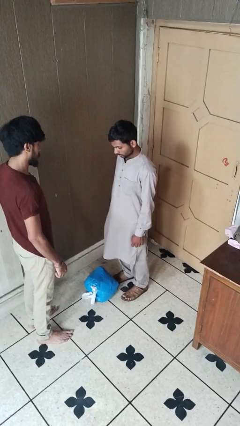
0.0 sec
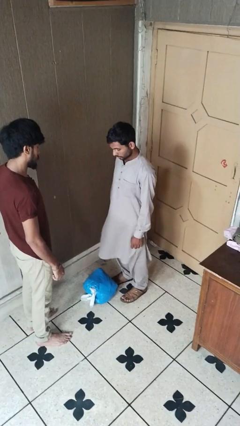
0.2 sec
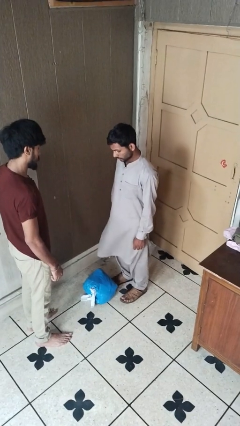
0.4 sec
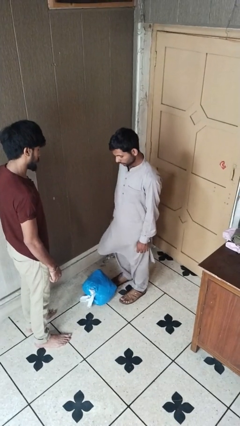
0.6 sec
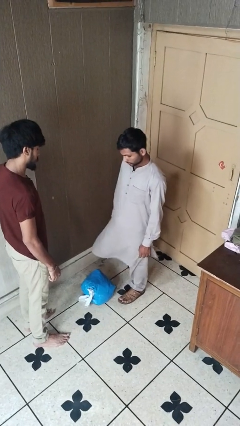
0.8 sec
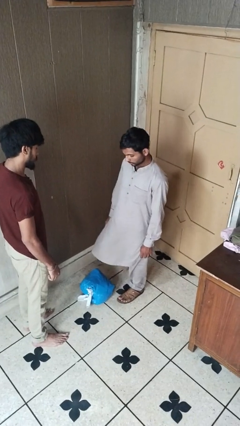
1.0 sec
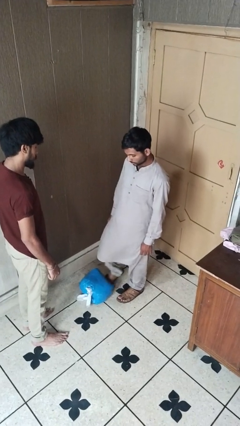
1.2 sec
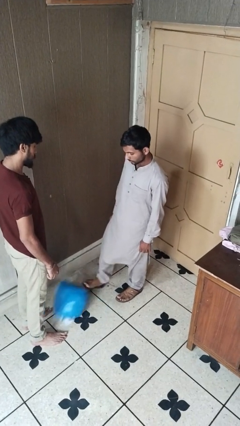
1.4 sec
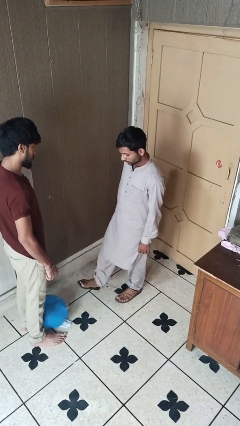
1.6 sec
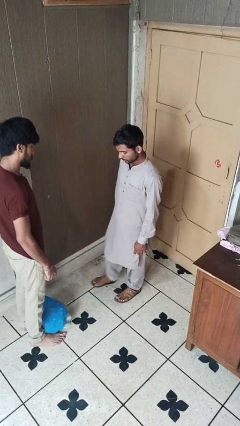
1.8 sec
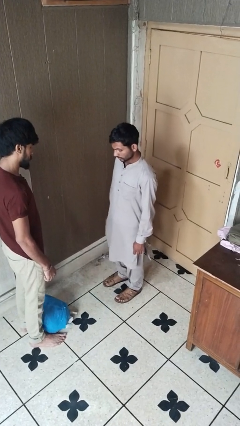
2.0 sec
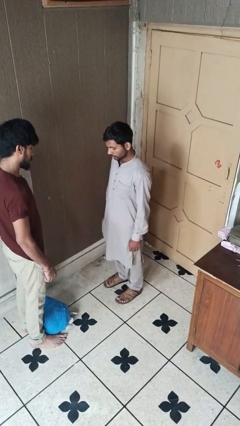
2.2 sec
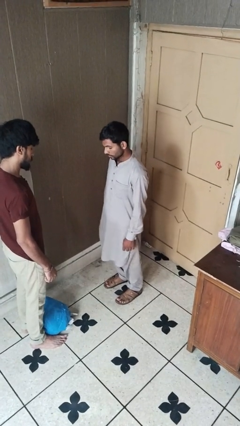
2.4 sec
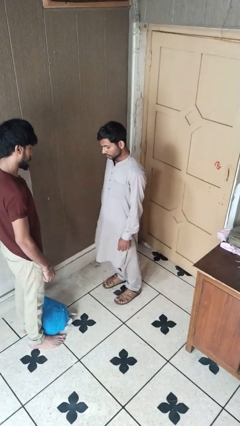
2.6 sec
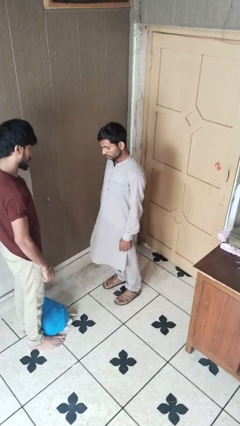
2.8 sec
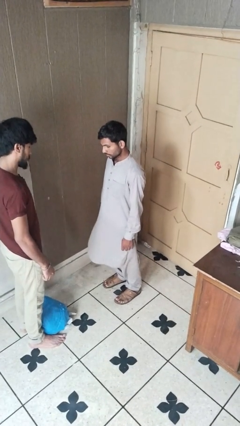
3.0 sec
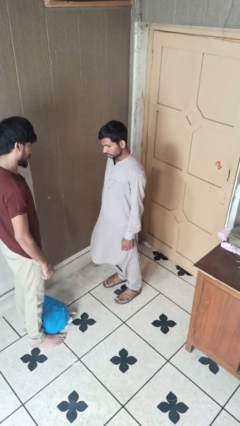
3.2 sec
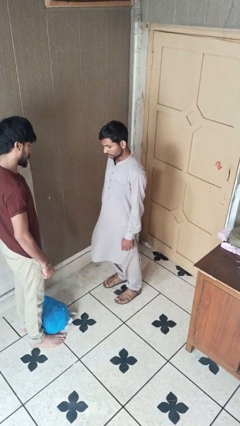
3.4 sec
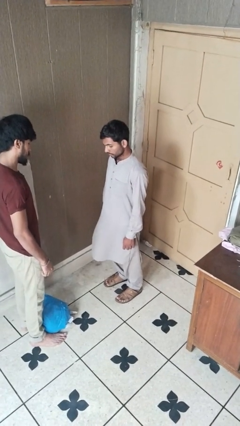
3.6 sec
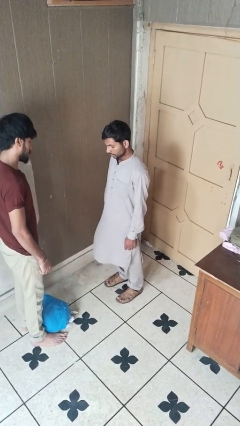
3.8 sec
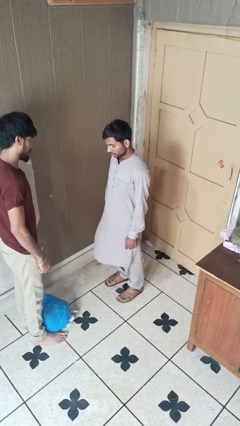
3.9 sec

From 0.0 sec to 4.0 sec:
person kicks object to person

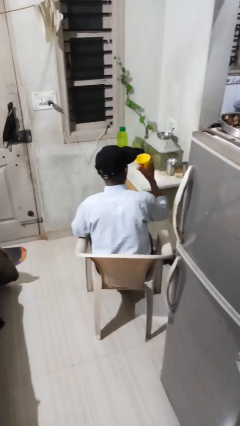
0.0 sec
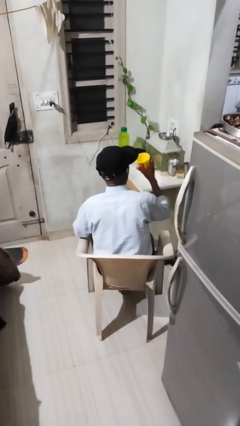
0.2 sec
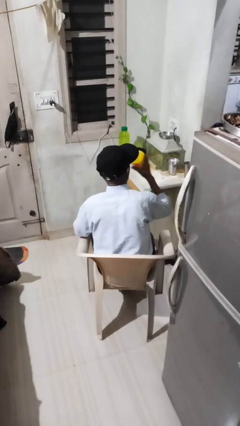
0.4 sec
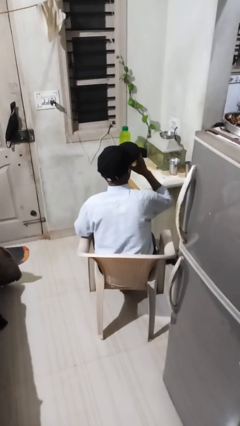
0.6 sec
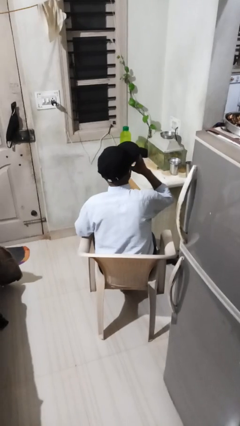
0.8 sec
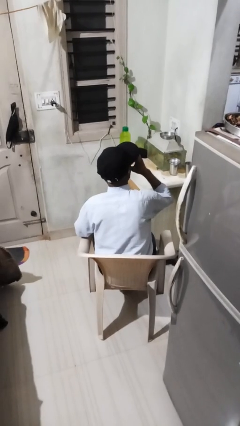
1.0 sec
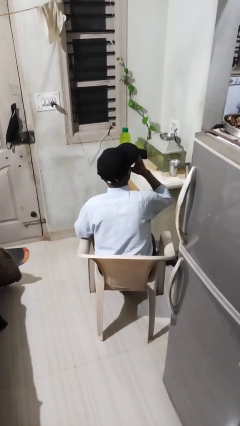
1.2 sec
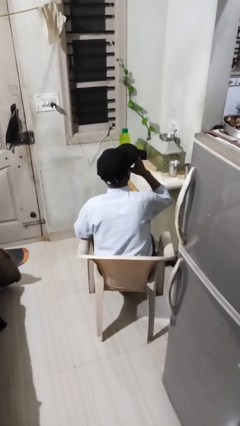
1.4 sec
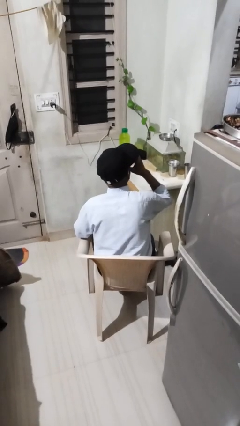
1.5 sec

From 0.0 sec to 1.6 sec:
person drinks from mug

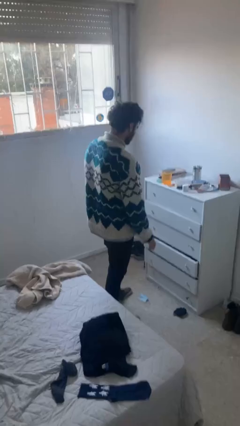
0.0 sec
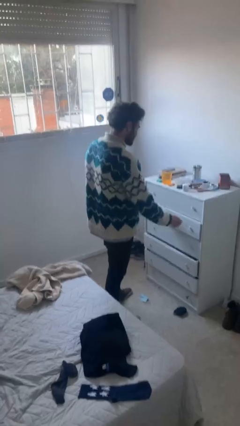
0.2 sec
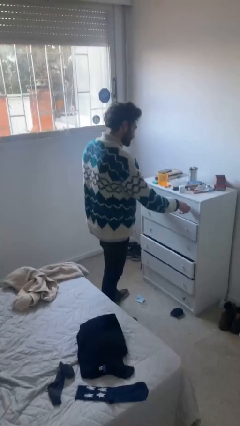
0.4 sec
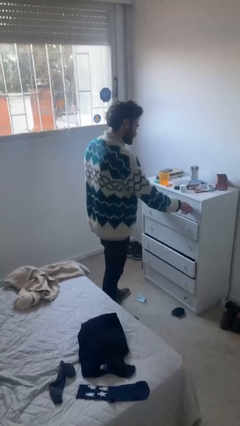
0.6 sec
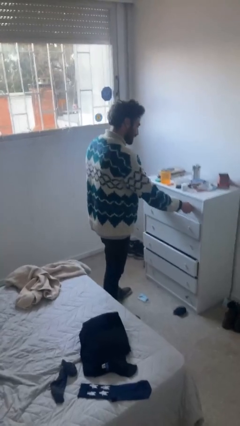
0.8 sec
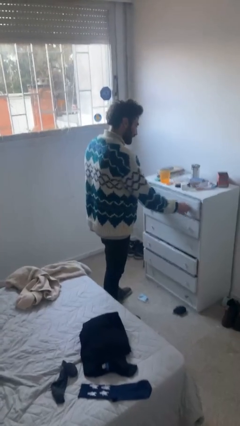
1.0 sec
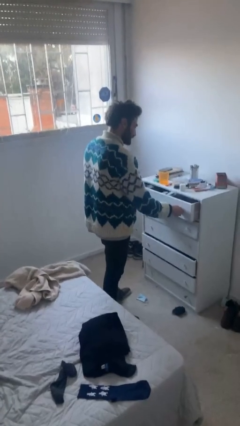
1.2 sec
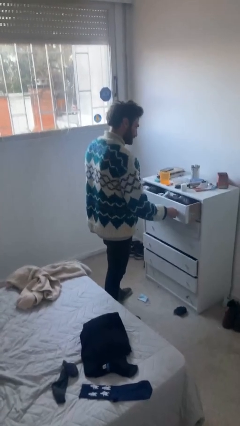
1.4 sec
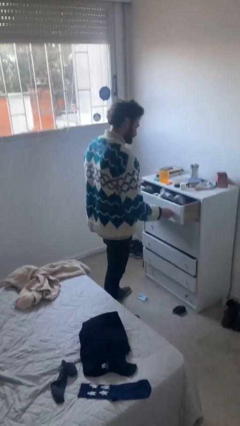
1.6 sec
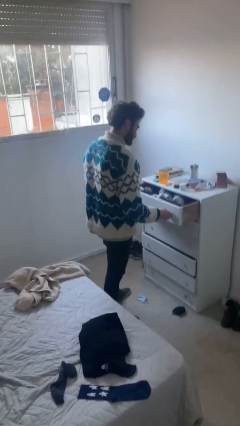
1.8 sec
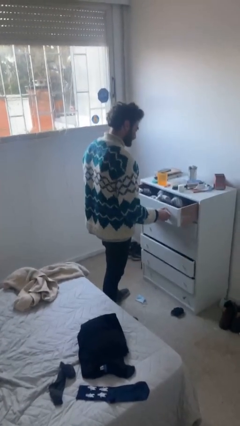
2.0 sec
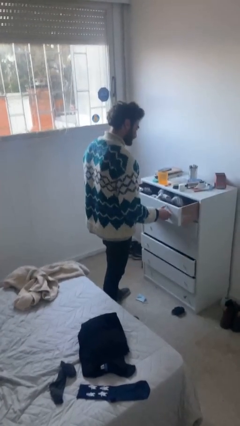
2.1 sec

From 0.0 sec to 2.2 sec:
person opens dresser drawer

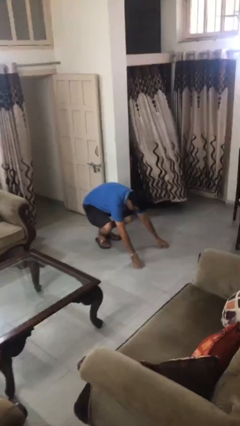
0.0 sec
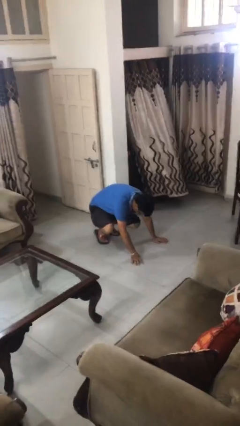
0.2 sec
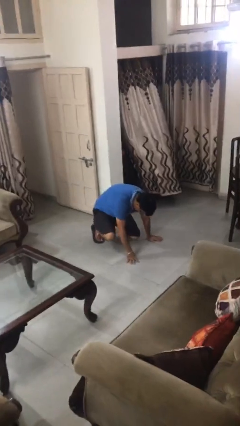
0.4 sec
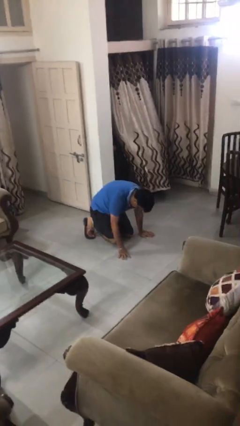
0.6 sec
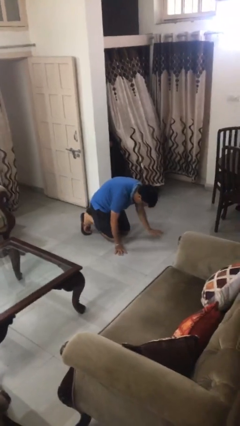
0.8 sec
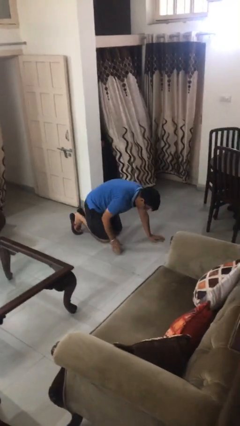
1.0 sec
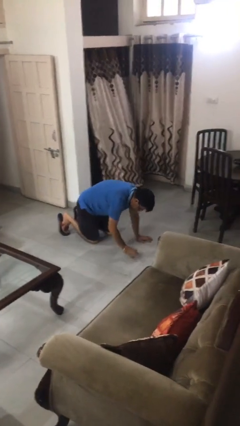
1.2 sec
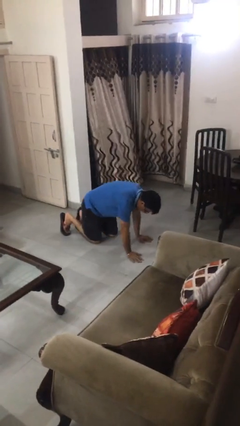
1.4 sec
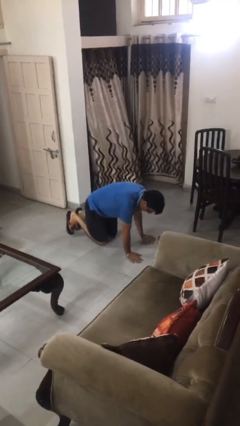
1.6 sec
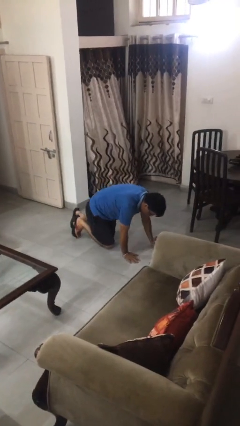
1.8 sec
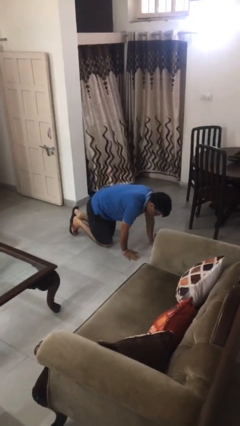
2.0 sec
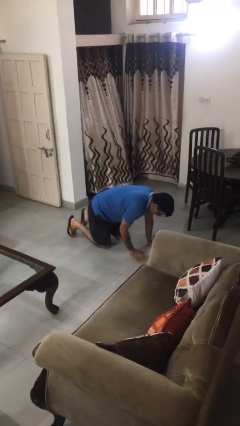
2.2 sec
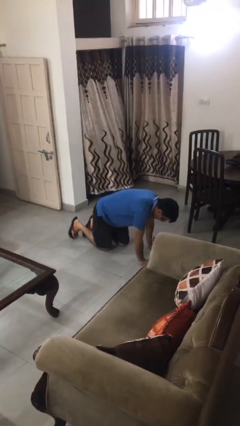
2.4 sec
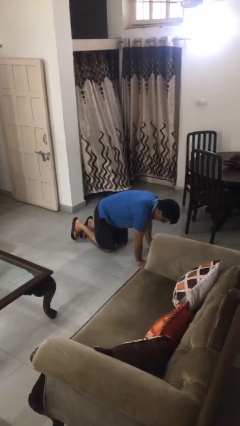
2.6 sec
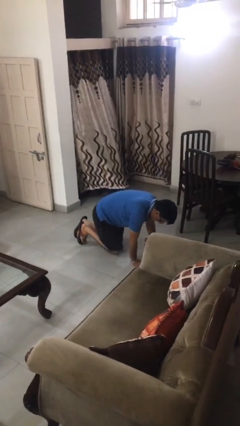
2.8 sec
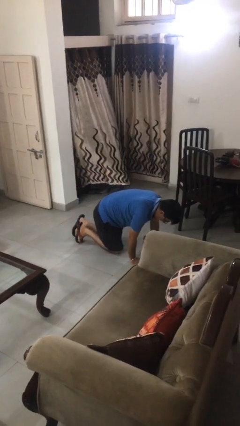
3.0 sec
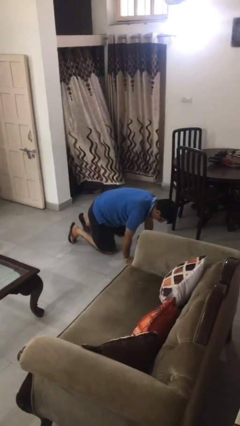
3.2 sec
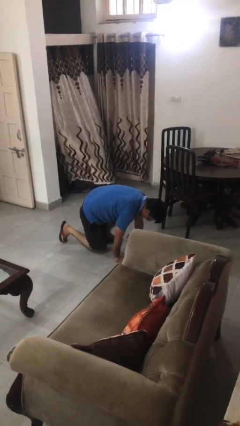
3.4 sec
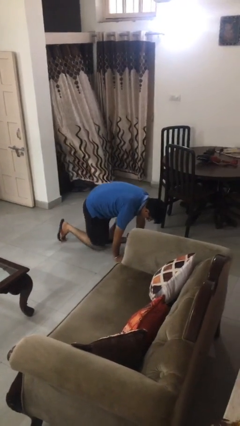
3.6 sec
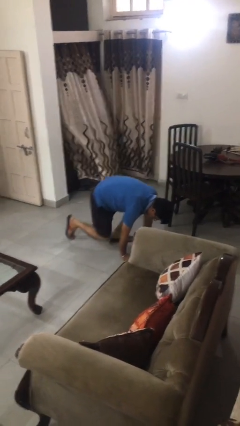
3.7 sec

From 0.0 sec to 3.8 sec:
person crawls

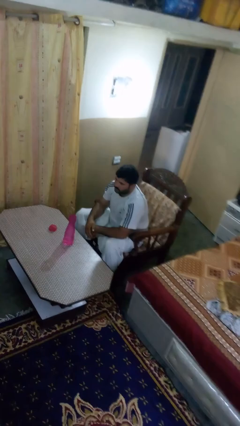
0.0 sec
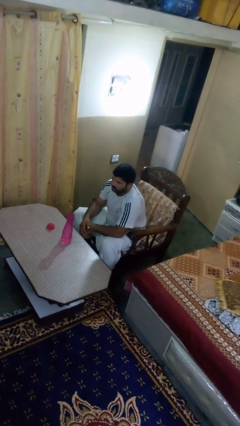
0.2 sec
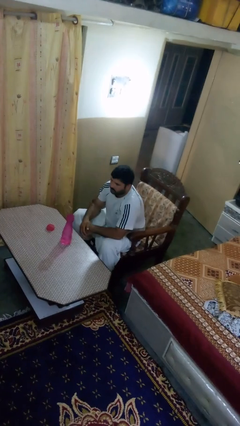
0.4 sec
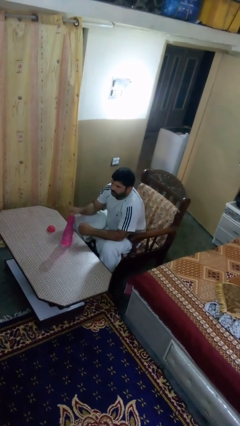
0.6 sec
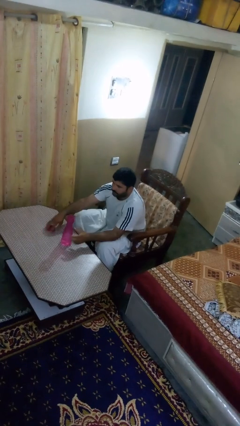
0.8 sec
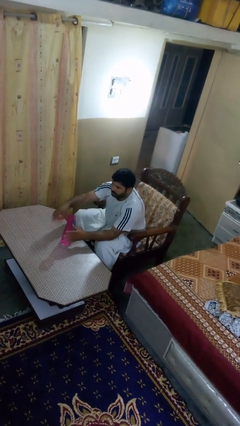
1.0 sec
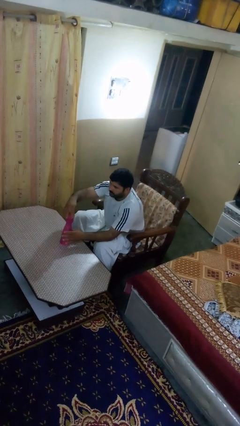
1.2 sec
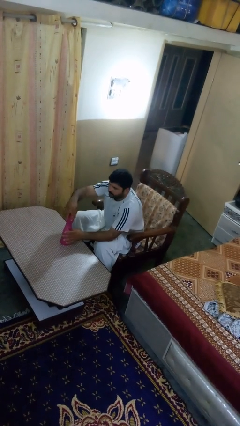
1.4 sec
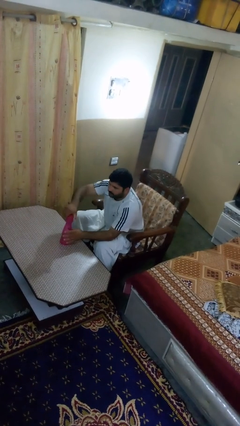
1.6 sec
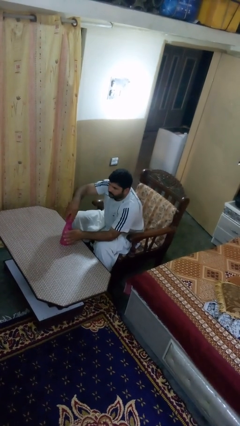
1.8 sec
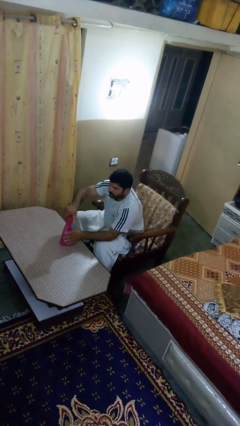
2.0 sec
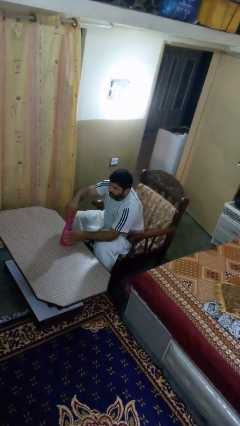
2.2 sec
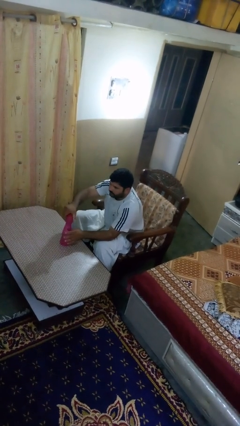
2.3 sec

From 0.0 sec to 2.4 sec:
person screws lid to bottle

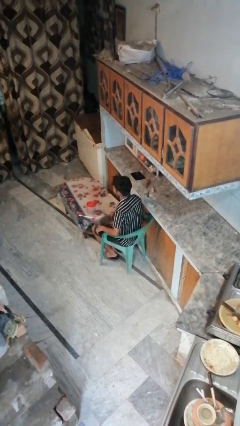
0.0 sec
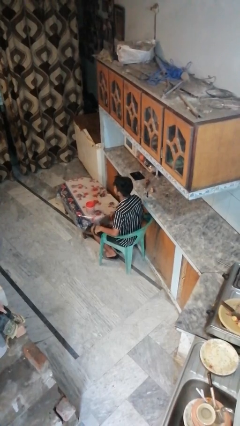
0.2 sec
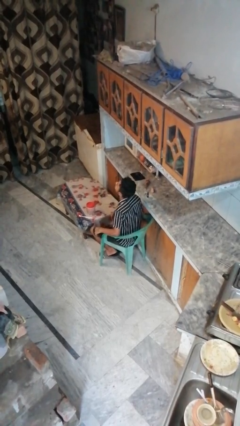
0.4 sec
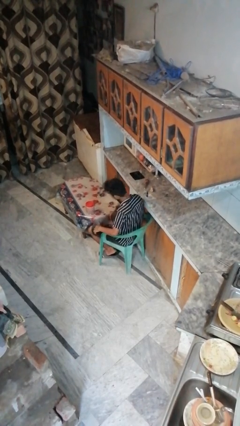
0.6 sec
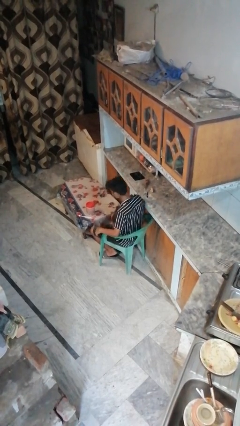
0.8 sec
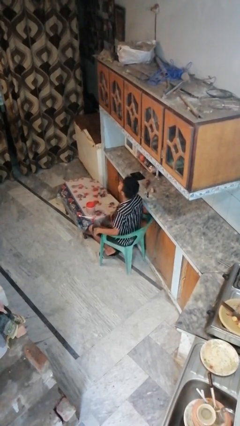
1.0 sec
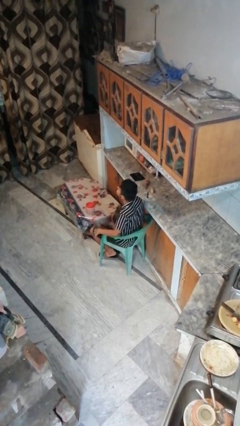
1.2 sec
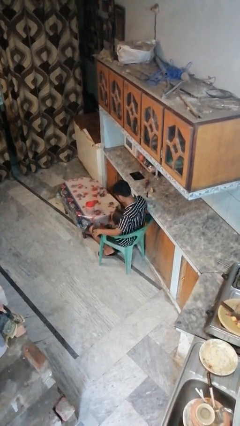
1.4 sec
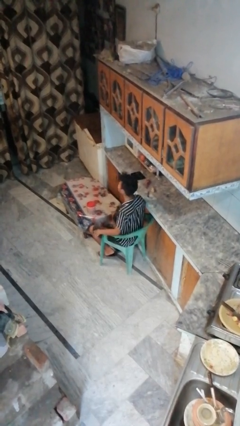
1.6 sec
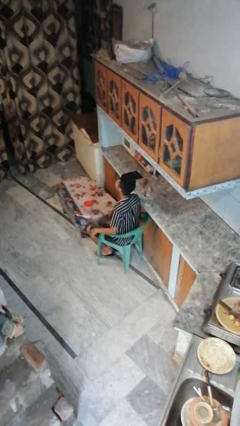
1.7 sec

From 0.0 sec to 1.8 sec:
person nods head

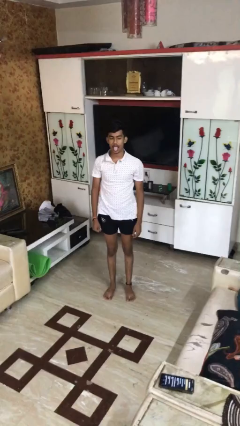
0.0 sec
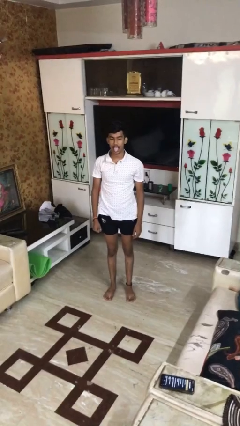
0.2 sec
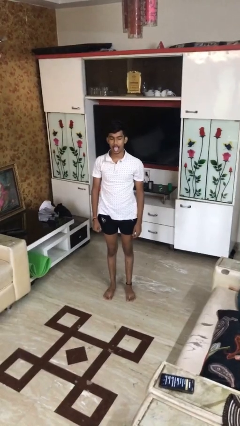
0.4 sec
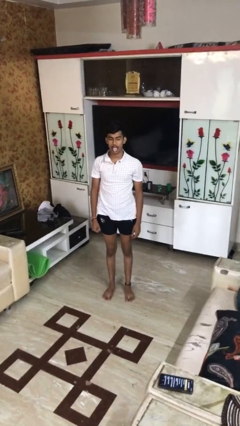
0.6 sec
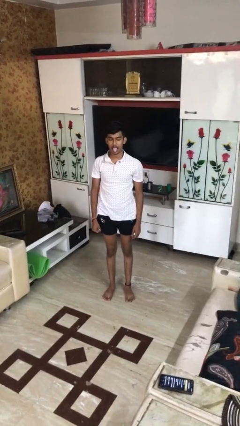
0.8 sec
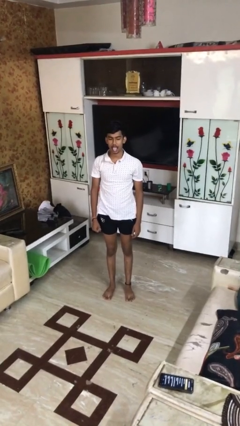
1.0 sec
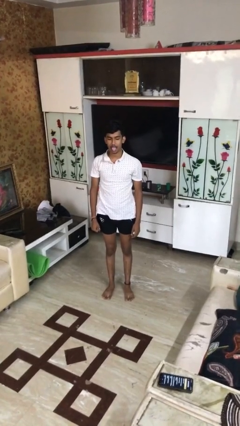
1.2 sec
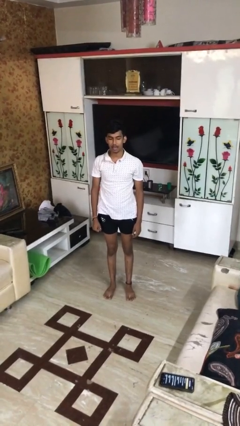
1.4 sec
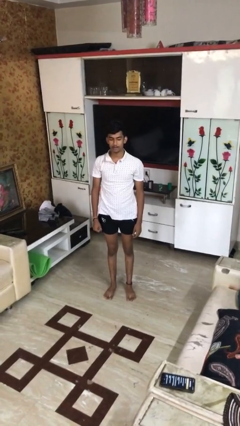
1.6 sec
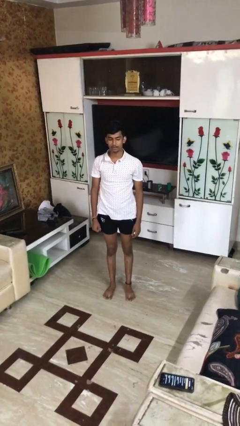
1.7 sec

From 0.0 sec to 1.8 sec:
person sticks out tongue
